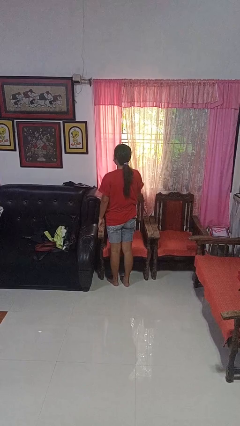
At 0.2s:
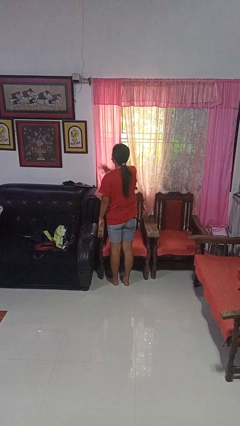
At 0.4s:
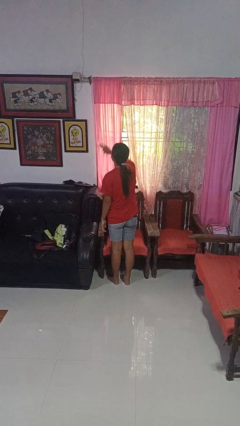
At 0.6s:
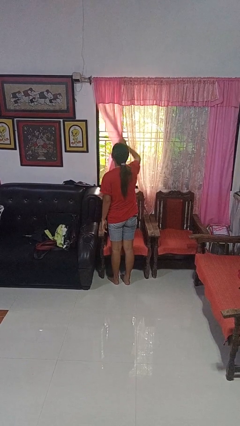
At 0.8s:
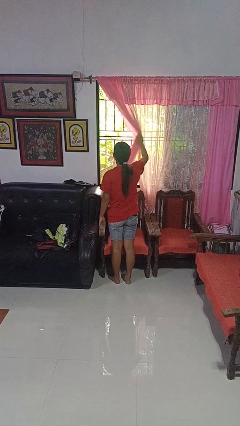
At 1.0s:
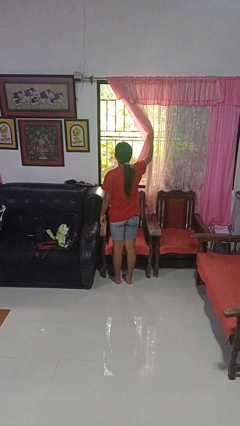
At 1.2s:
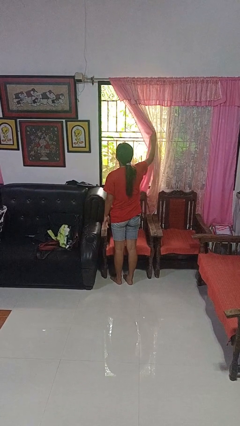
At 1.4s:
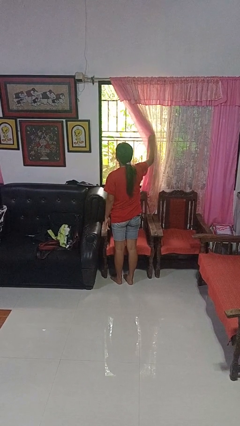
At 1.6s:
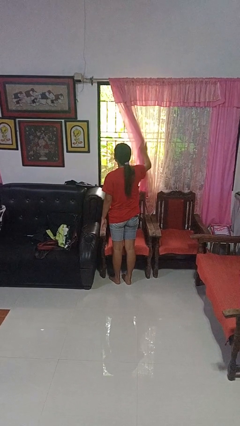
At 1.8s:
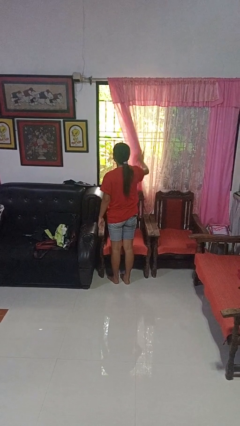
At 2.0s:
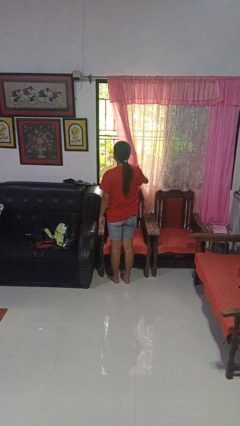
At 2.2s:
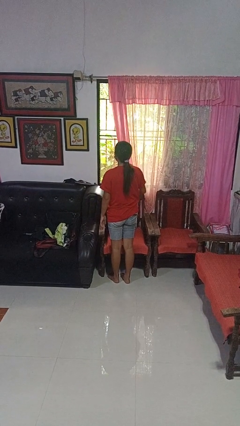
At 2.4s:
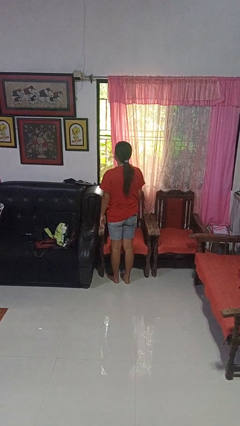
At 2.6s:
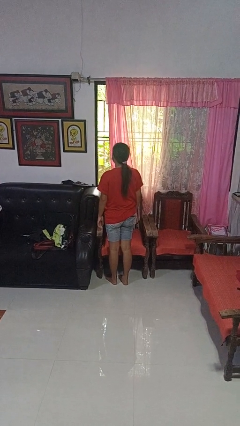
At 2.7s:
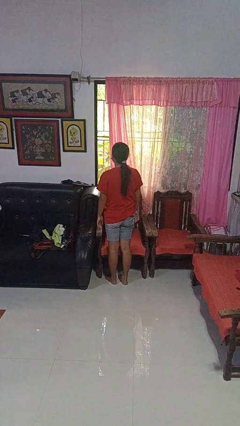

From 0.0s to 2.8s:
person opens curtains

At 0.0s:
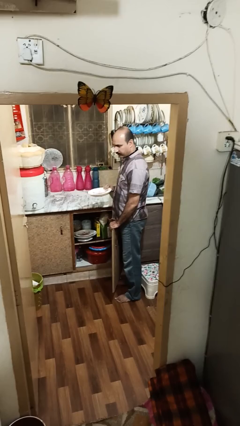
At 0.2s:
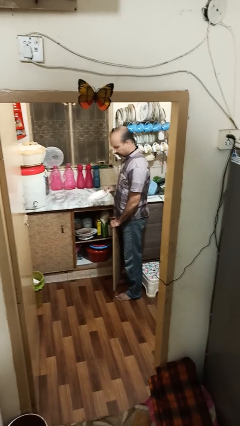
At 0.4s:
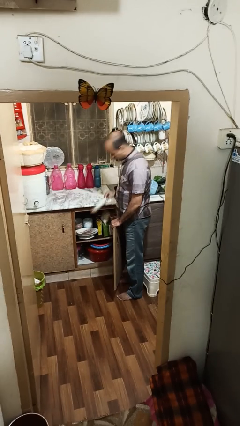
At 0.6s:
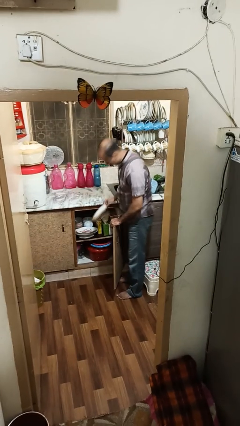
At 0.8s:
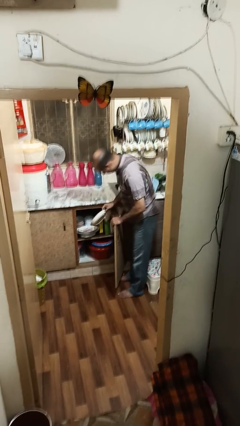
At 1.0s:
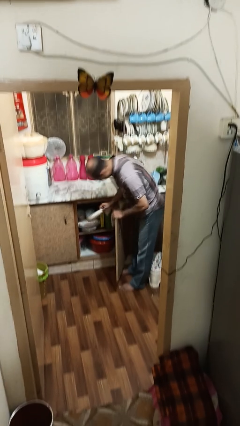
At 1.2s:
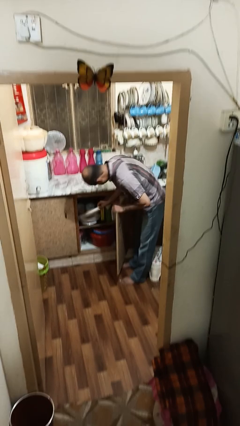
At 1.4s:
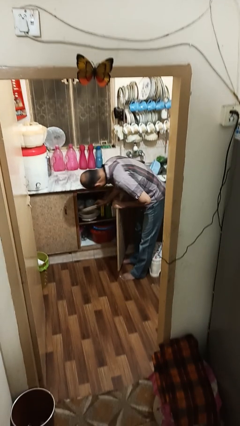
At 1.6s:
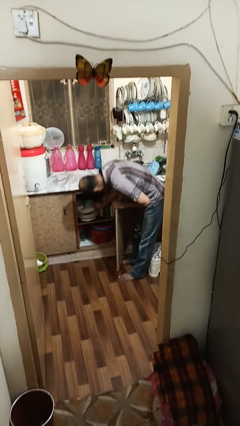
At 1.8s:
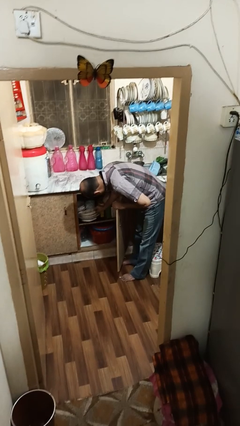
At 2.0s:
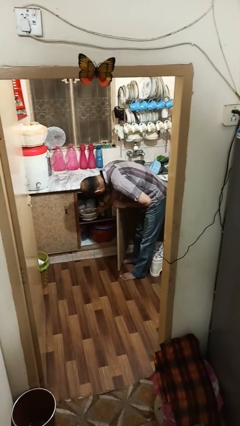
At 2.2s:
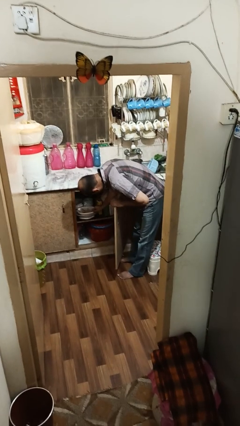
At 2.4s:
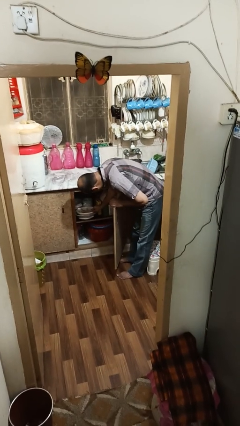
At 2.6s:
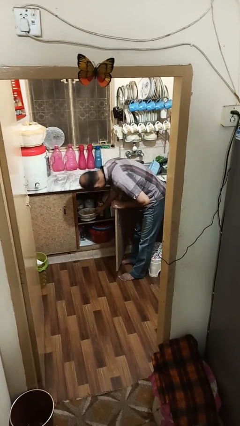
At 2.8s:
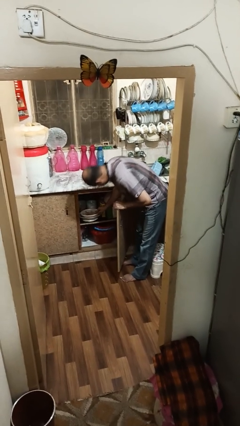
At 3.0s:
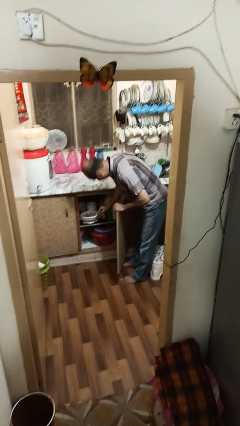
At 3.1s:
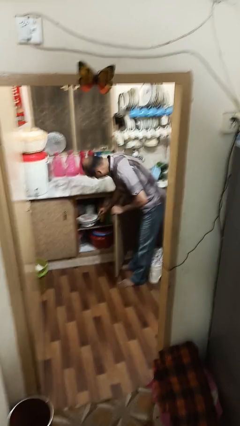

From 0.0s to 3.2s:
person puts object in cabinet

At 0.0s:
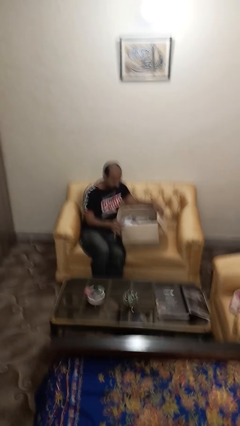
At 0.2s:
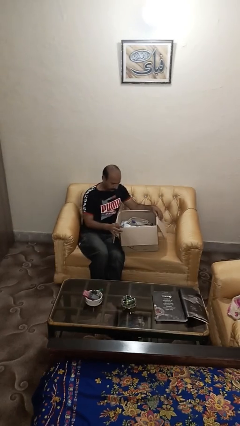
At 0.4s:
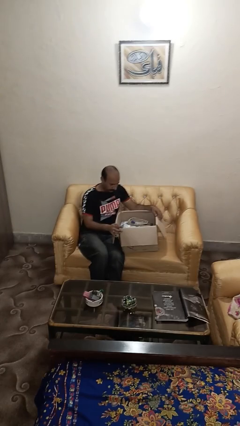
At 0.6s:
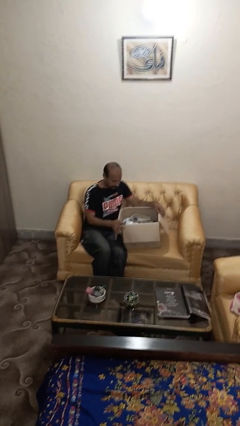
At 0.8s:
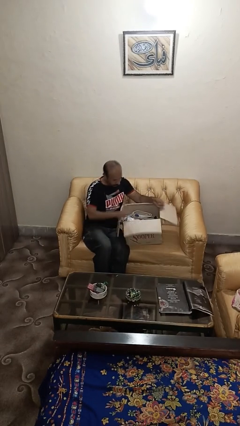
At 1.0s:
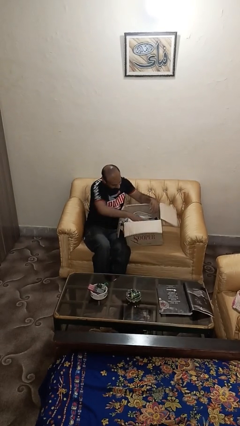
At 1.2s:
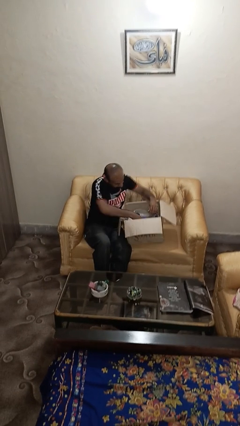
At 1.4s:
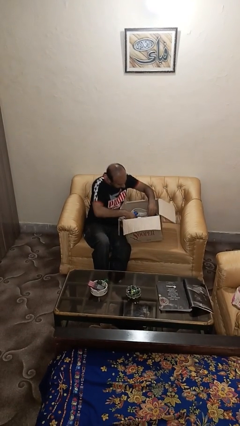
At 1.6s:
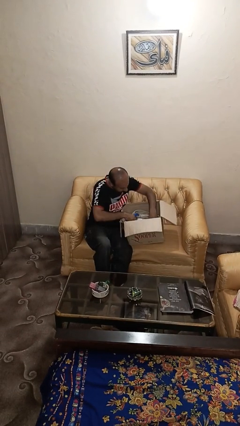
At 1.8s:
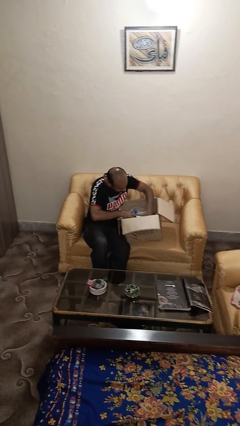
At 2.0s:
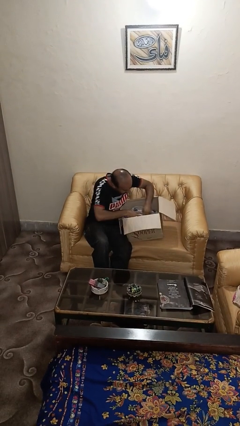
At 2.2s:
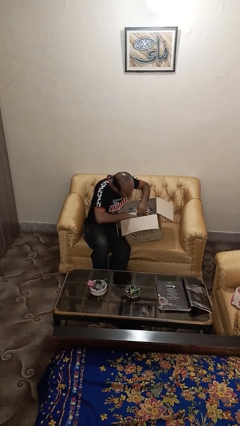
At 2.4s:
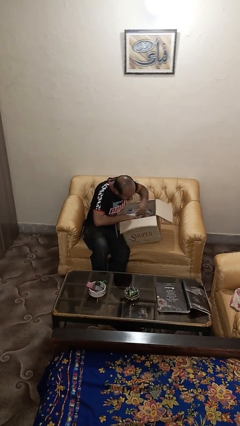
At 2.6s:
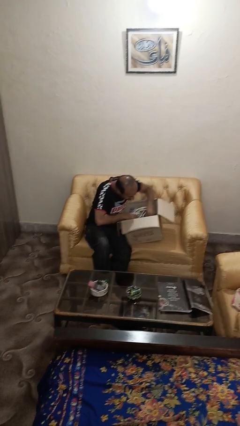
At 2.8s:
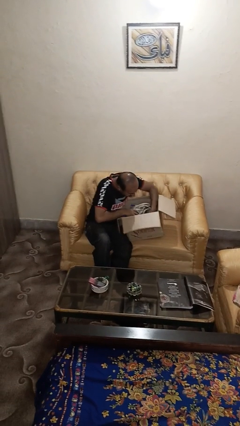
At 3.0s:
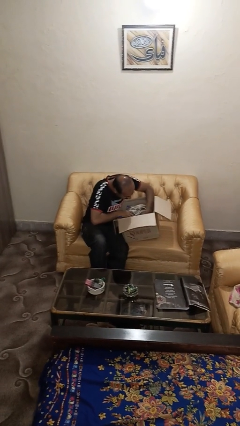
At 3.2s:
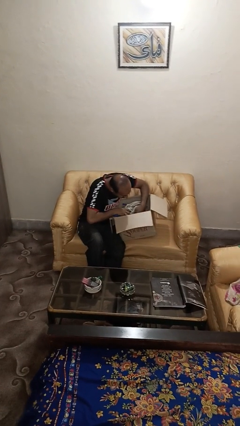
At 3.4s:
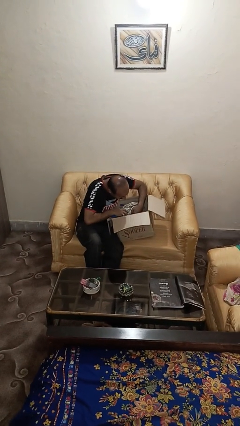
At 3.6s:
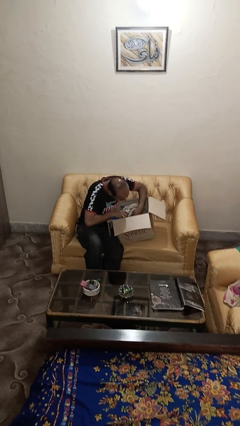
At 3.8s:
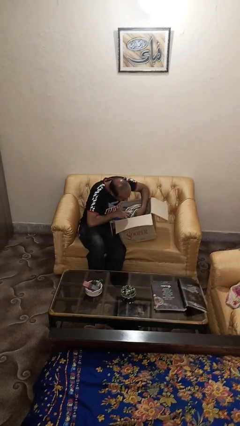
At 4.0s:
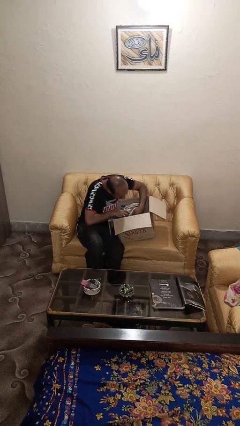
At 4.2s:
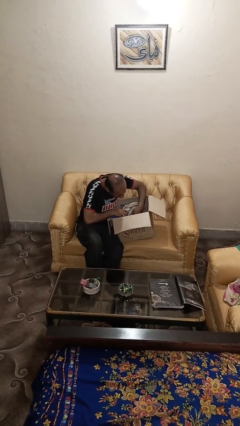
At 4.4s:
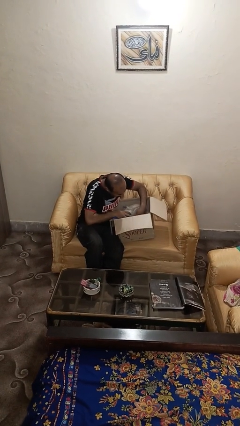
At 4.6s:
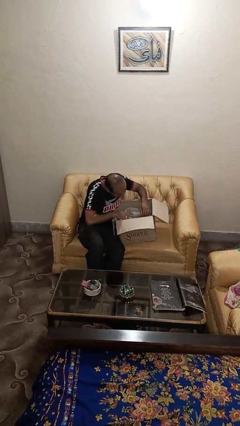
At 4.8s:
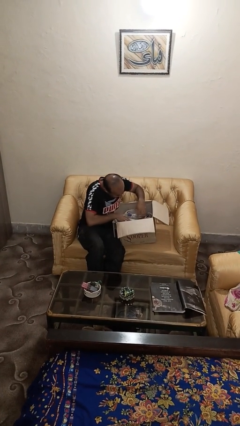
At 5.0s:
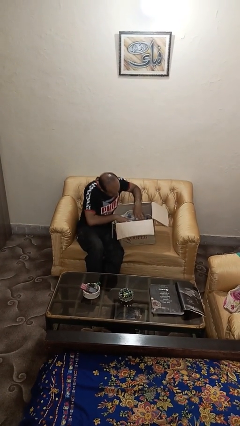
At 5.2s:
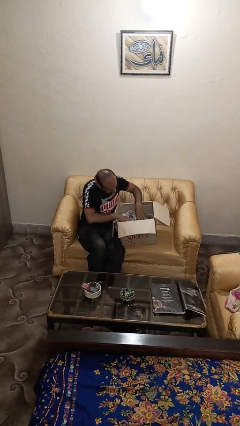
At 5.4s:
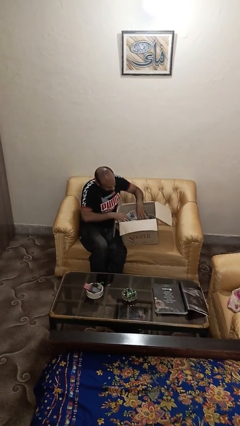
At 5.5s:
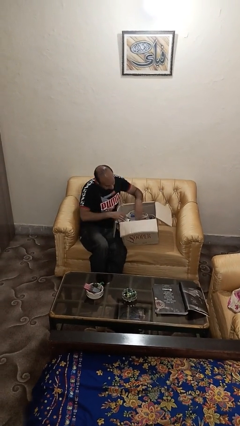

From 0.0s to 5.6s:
person searches in box

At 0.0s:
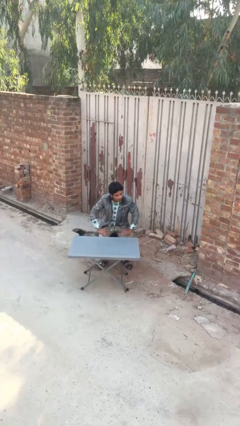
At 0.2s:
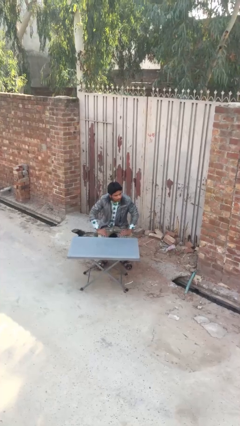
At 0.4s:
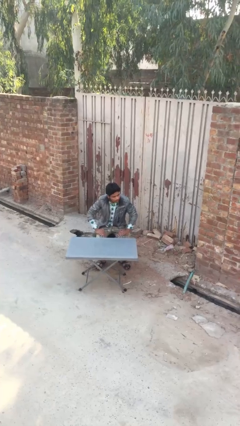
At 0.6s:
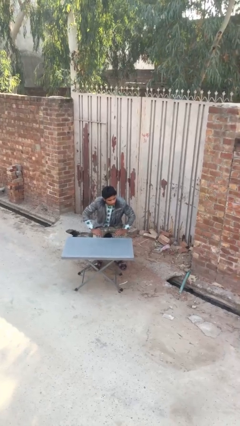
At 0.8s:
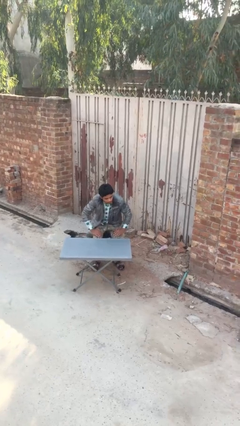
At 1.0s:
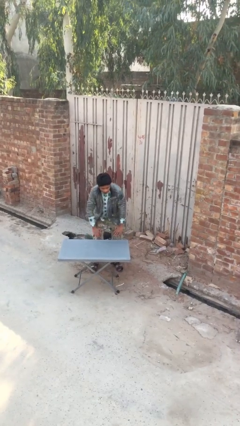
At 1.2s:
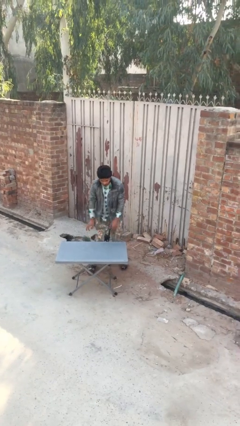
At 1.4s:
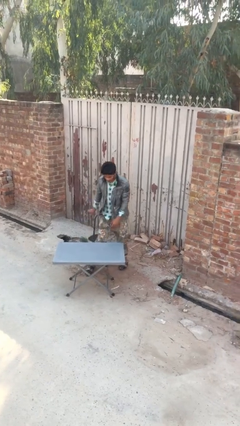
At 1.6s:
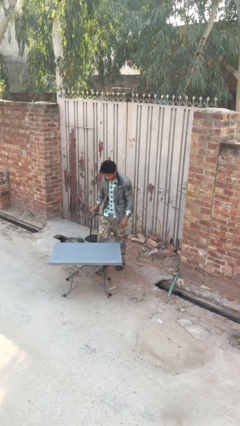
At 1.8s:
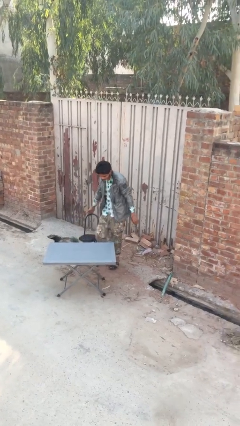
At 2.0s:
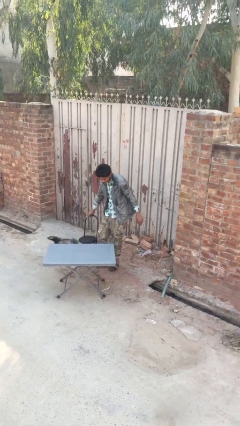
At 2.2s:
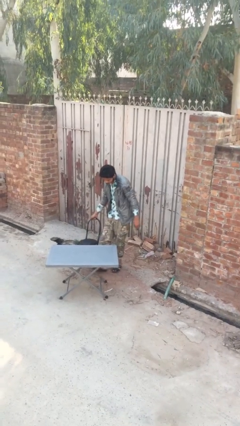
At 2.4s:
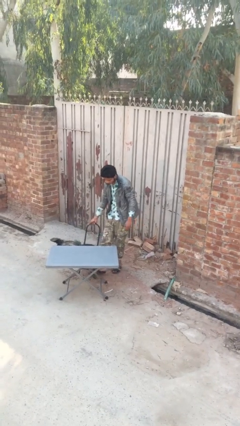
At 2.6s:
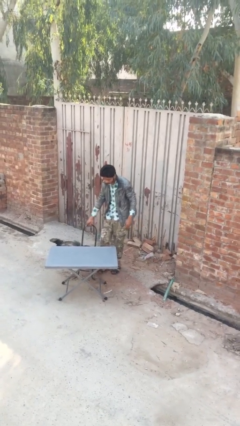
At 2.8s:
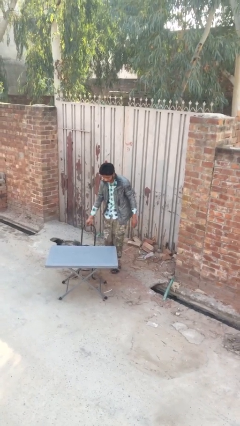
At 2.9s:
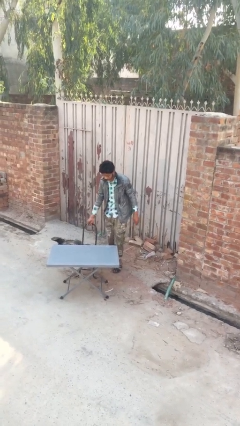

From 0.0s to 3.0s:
person stands up

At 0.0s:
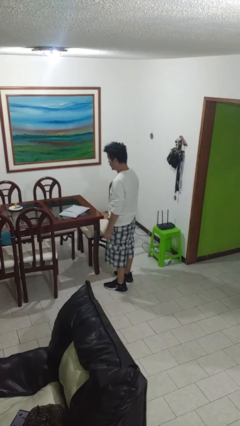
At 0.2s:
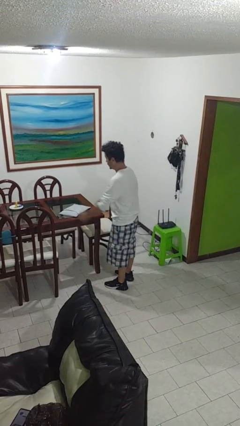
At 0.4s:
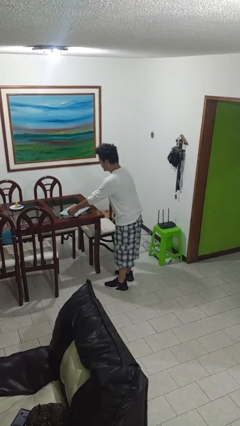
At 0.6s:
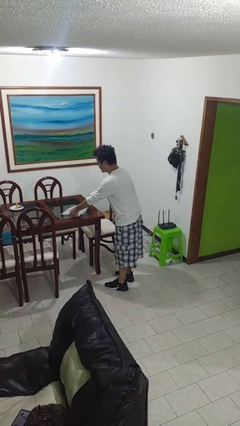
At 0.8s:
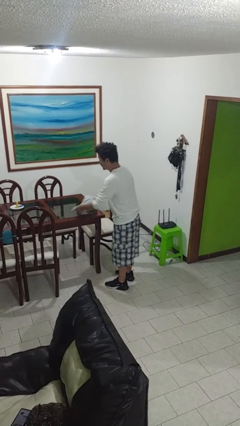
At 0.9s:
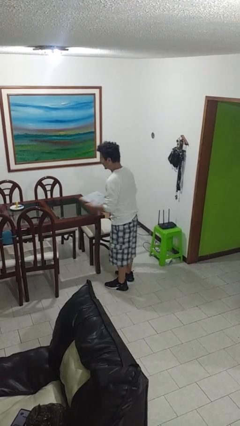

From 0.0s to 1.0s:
person picks up object from table

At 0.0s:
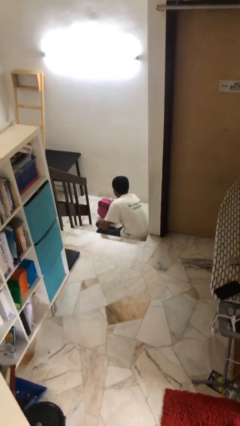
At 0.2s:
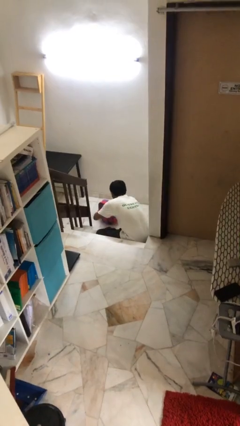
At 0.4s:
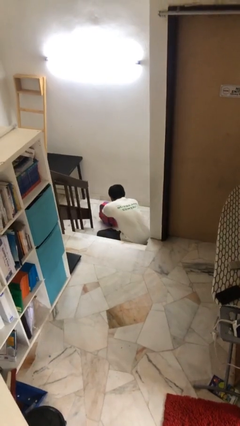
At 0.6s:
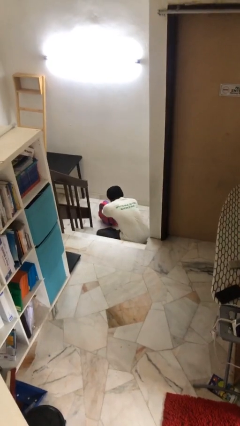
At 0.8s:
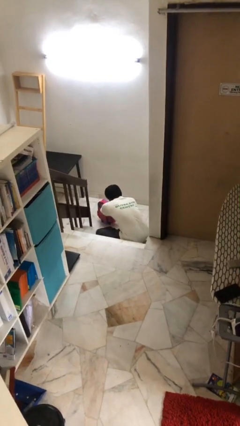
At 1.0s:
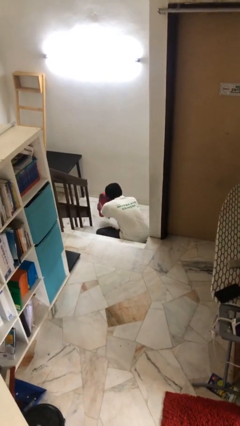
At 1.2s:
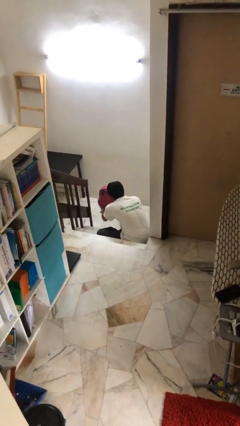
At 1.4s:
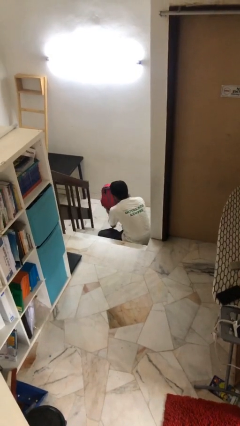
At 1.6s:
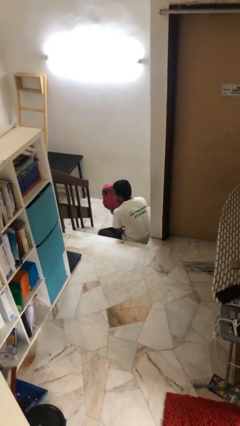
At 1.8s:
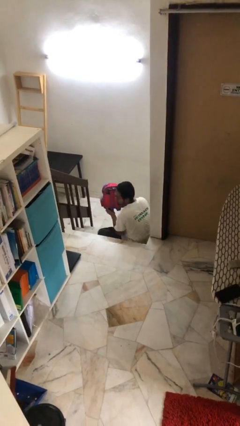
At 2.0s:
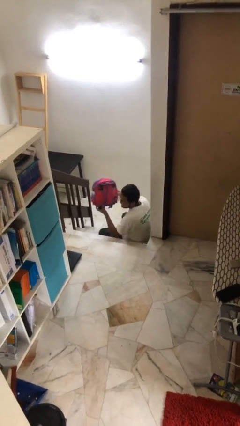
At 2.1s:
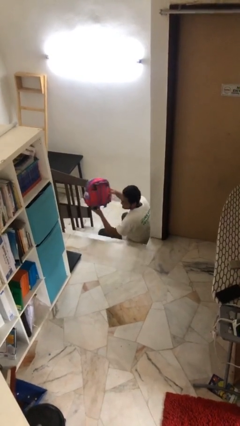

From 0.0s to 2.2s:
person picks up object from floor
